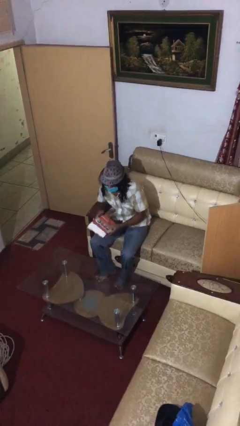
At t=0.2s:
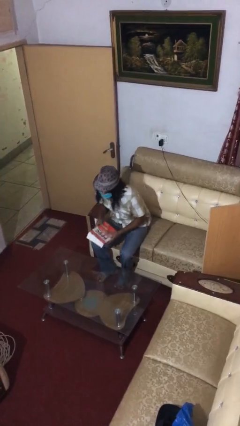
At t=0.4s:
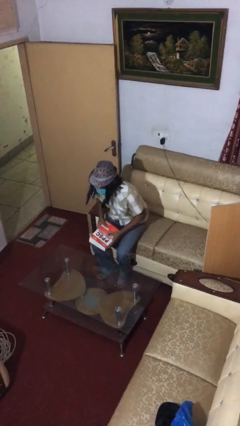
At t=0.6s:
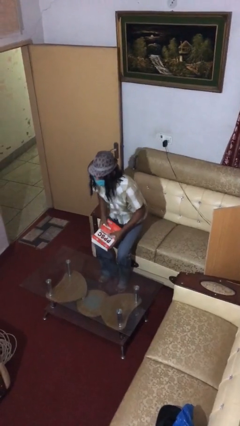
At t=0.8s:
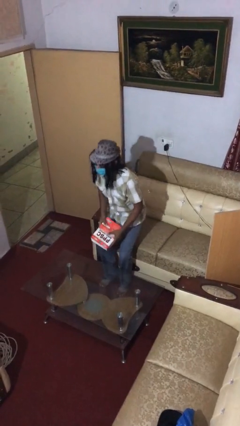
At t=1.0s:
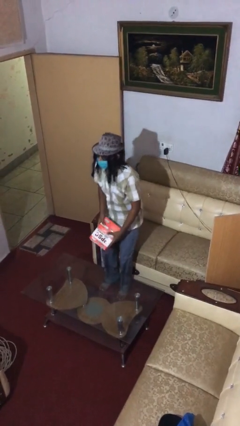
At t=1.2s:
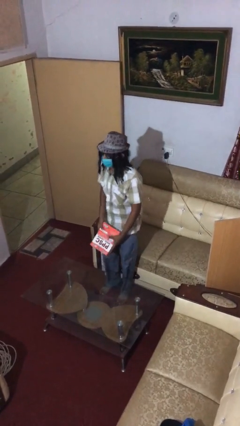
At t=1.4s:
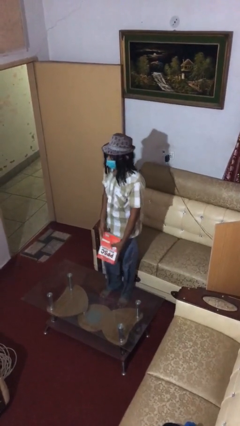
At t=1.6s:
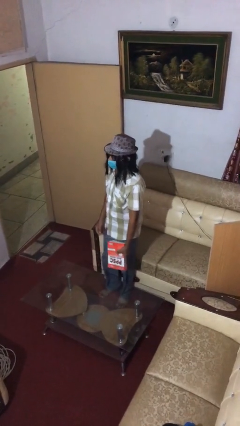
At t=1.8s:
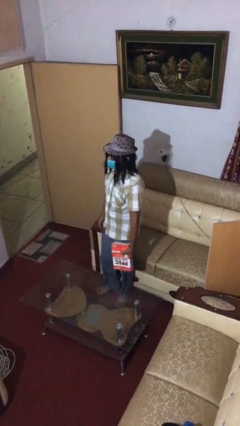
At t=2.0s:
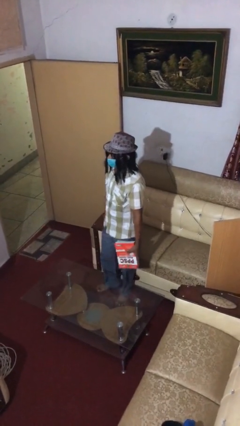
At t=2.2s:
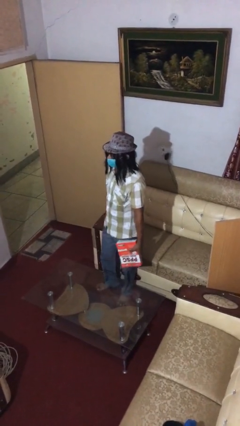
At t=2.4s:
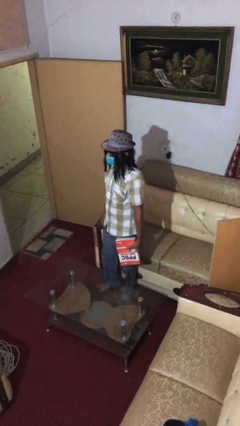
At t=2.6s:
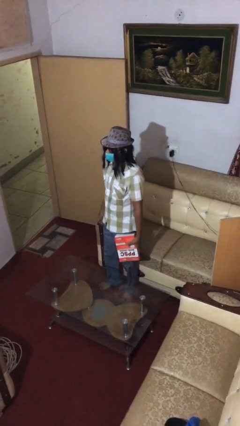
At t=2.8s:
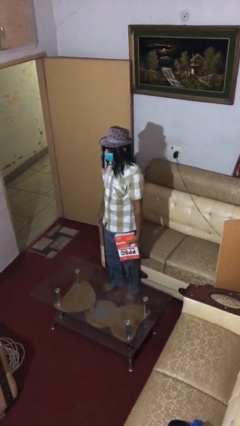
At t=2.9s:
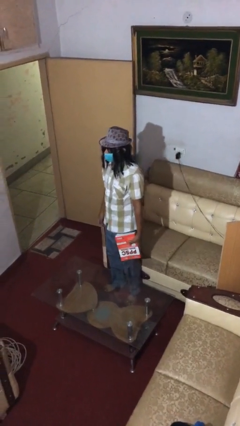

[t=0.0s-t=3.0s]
person stands up

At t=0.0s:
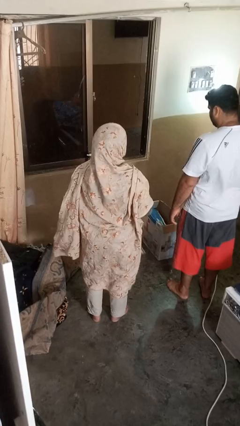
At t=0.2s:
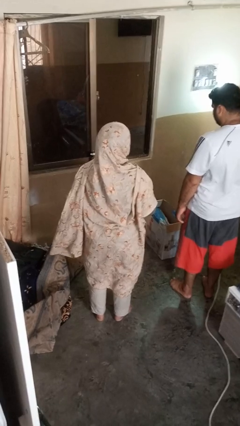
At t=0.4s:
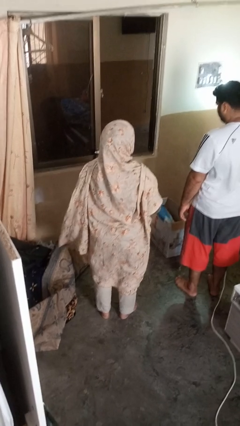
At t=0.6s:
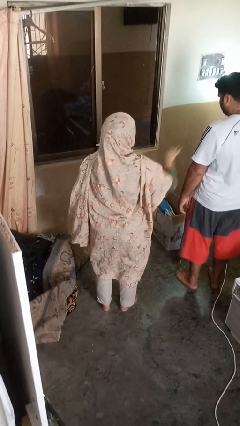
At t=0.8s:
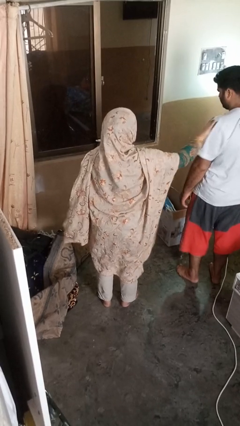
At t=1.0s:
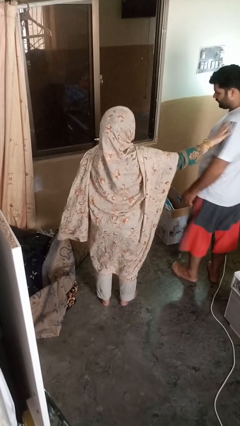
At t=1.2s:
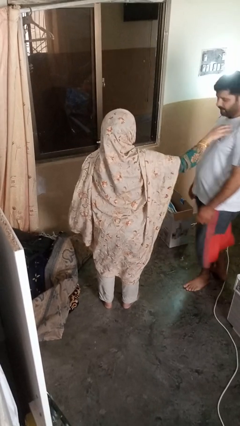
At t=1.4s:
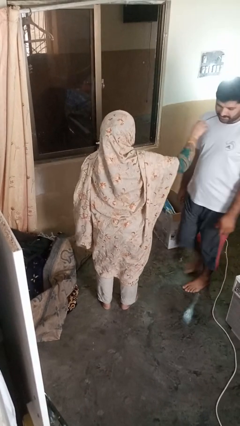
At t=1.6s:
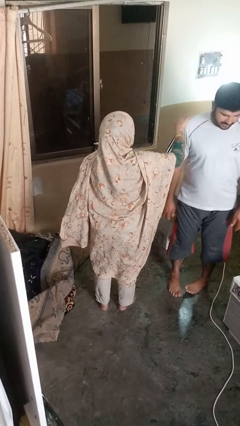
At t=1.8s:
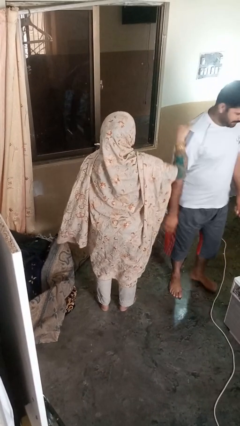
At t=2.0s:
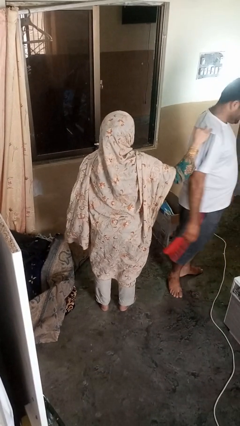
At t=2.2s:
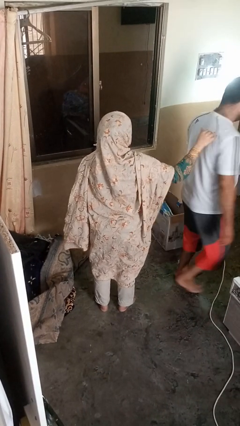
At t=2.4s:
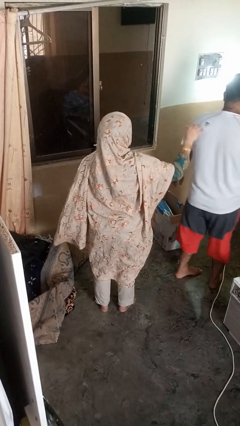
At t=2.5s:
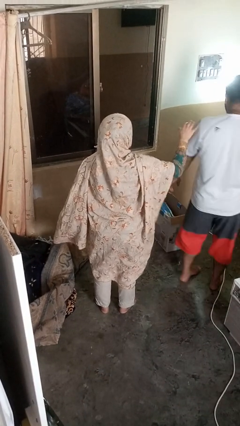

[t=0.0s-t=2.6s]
person grabs person by shoulder

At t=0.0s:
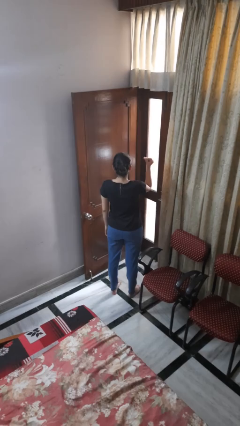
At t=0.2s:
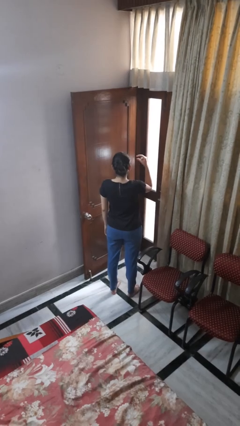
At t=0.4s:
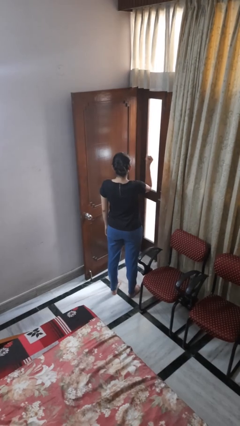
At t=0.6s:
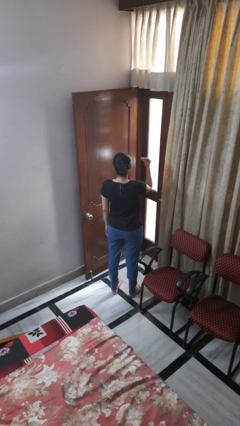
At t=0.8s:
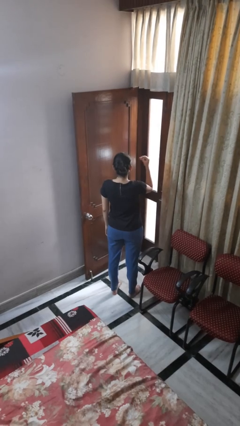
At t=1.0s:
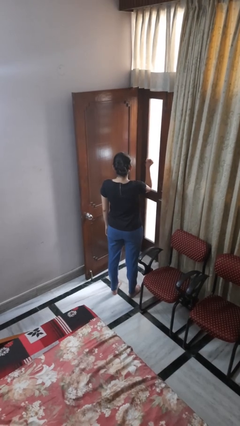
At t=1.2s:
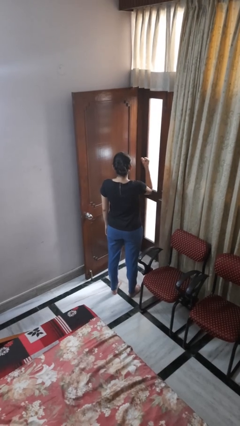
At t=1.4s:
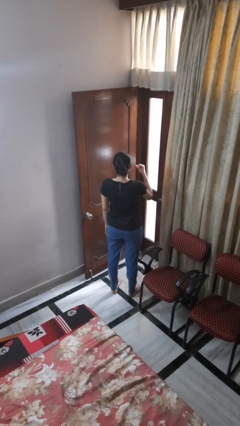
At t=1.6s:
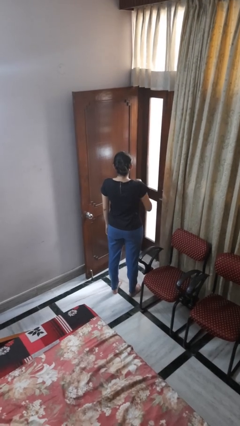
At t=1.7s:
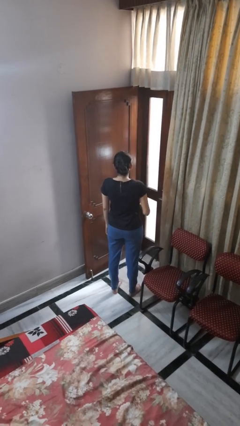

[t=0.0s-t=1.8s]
person snaps fingers

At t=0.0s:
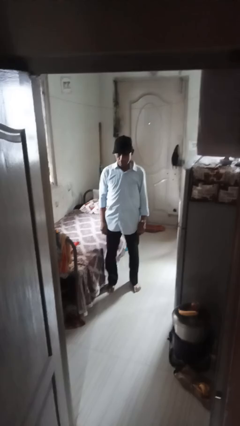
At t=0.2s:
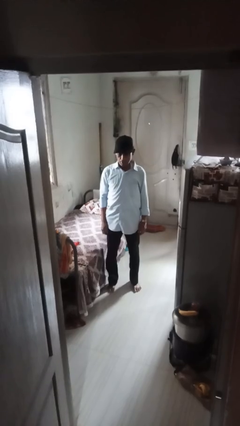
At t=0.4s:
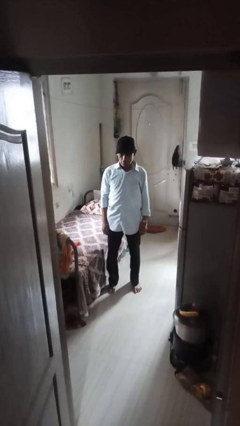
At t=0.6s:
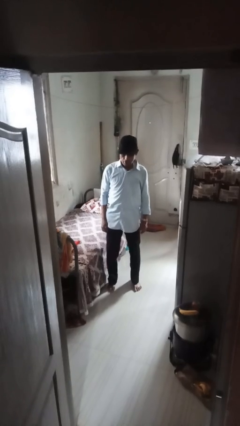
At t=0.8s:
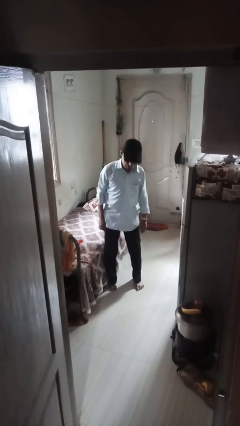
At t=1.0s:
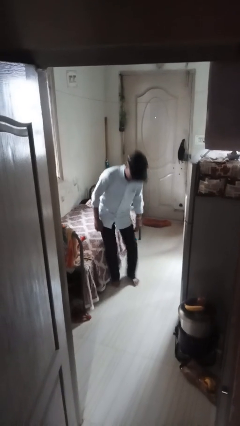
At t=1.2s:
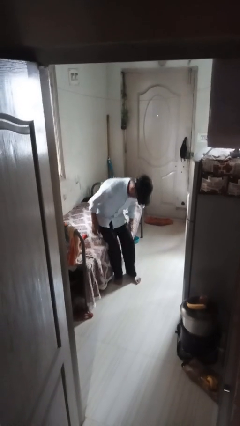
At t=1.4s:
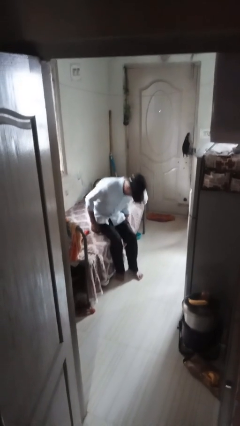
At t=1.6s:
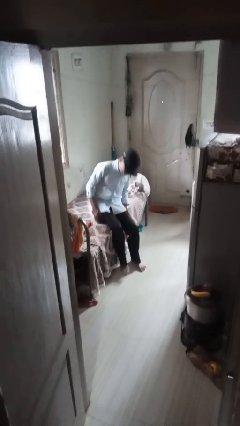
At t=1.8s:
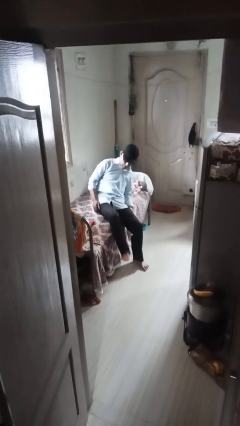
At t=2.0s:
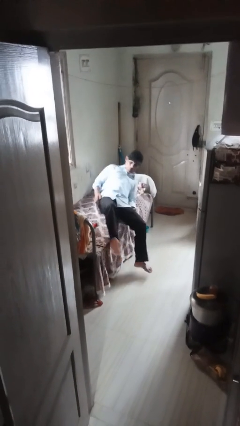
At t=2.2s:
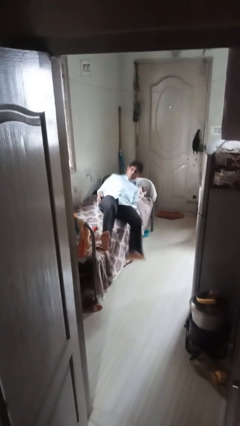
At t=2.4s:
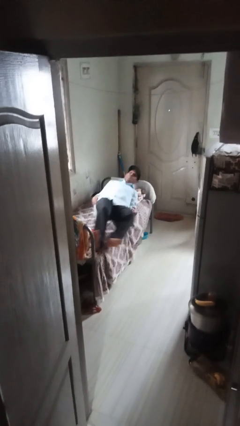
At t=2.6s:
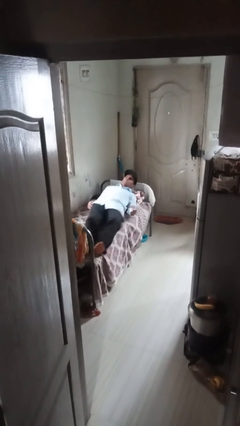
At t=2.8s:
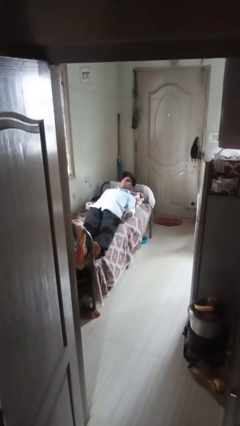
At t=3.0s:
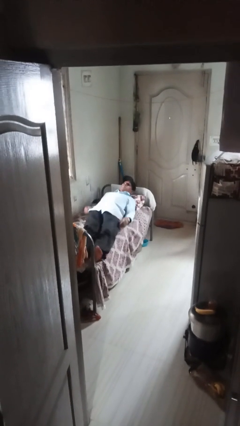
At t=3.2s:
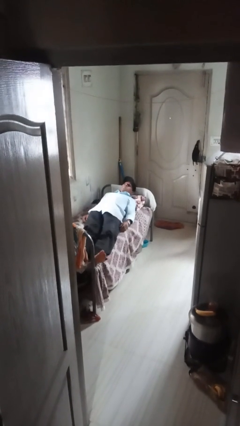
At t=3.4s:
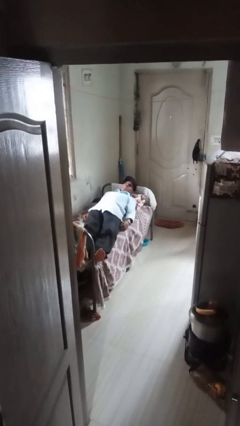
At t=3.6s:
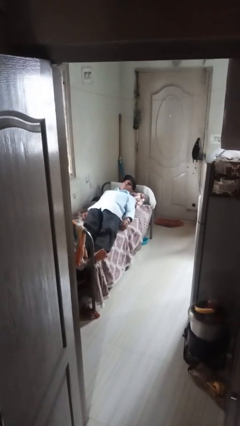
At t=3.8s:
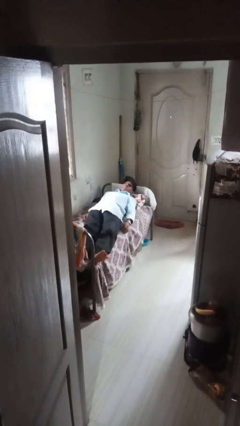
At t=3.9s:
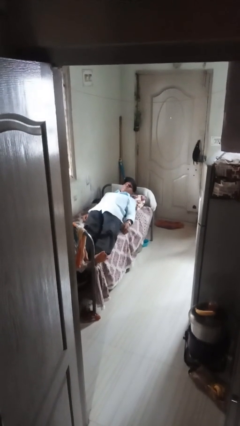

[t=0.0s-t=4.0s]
person lies down on bed

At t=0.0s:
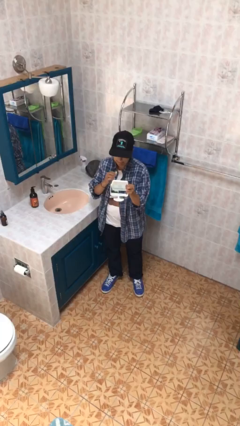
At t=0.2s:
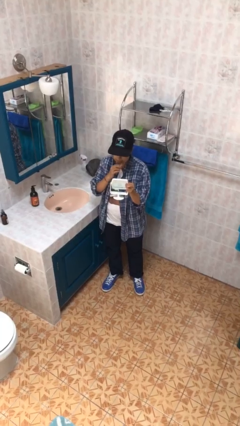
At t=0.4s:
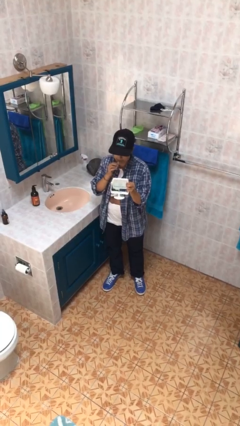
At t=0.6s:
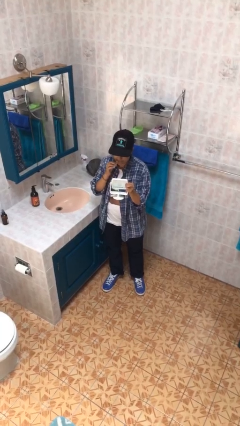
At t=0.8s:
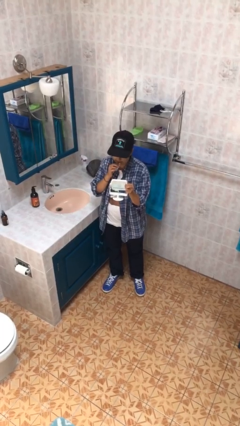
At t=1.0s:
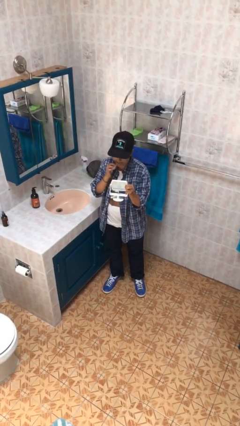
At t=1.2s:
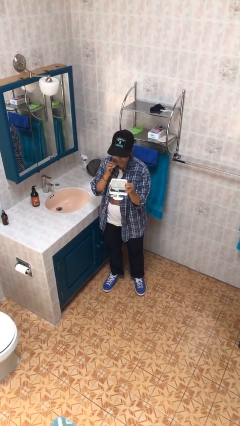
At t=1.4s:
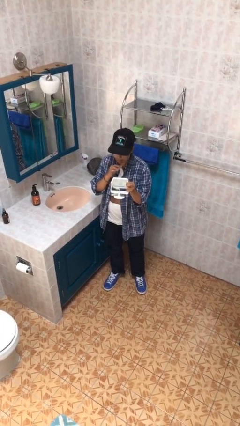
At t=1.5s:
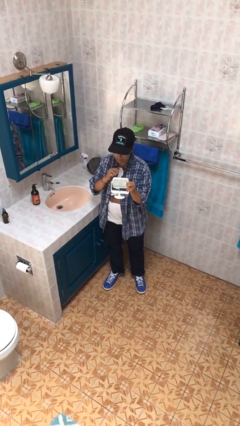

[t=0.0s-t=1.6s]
person applies lip makeup

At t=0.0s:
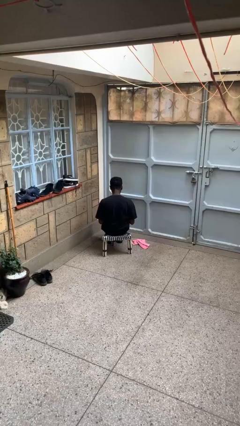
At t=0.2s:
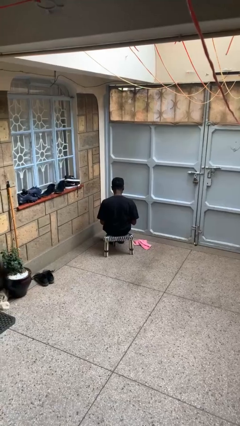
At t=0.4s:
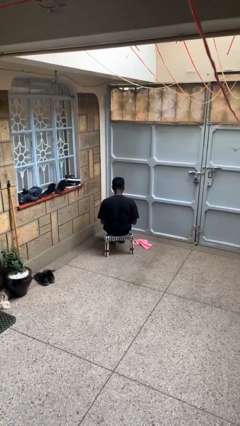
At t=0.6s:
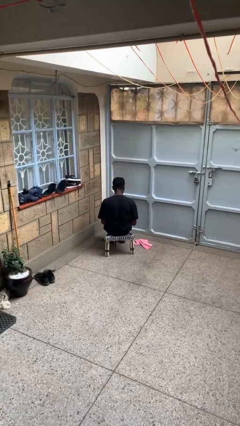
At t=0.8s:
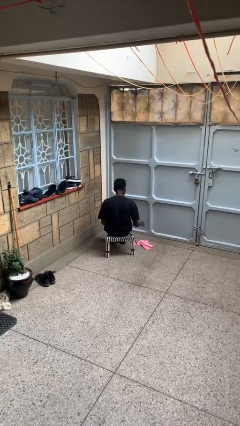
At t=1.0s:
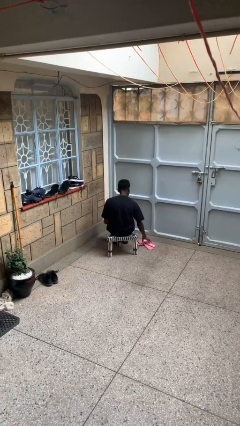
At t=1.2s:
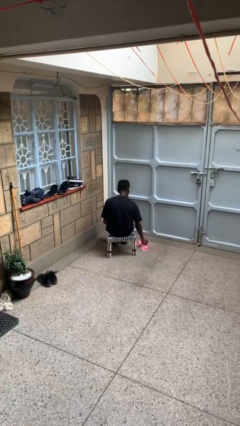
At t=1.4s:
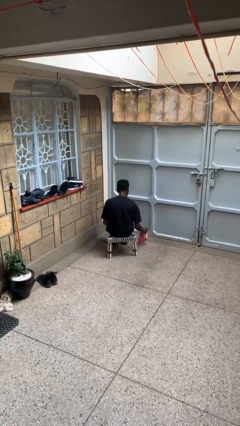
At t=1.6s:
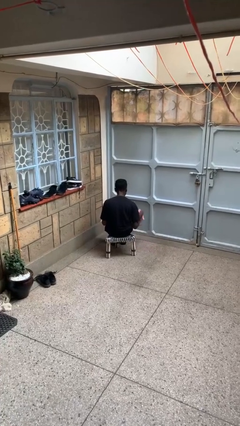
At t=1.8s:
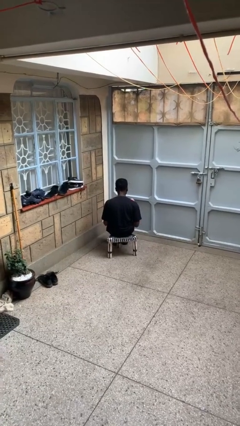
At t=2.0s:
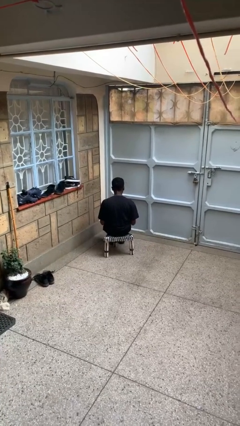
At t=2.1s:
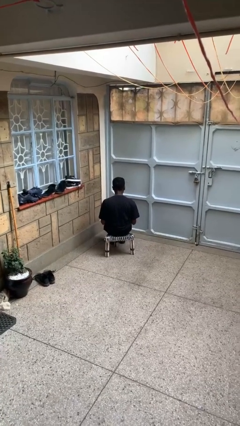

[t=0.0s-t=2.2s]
person picks up object from floor

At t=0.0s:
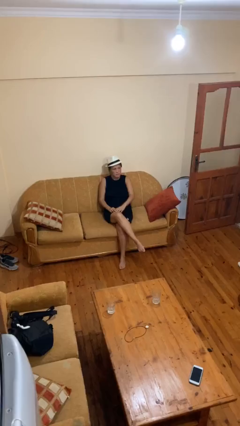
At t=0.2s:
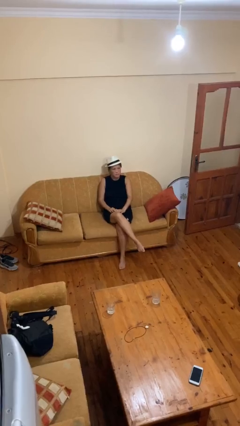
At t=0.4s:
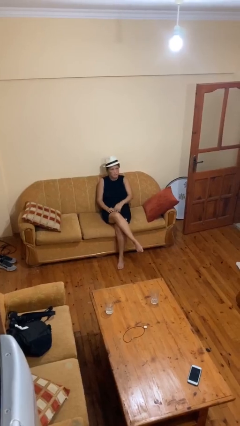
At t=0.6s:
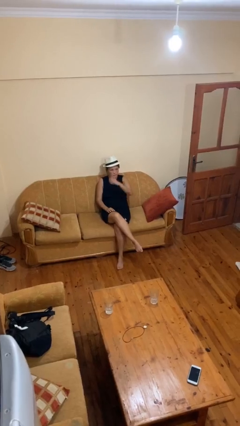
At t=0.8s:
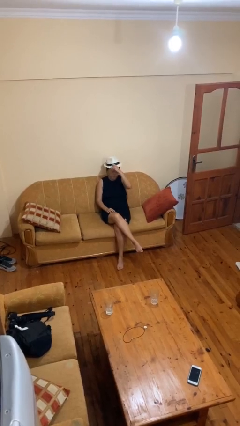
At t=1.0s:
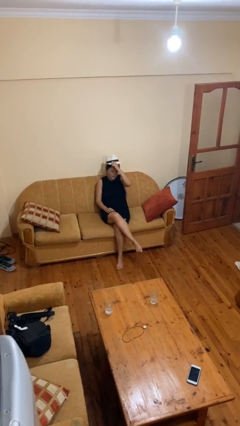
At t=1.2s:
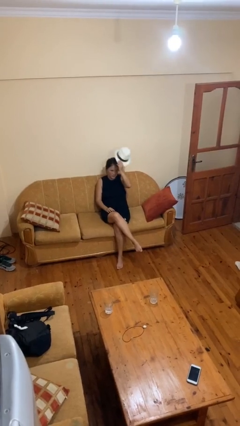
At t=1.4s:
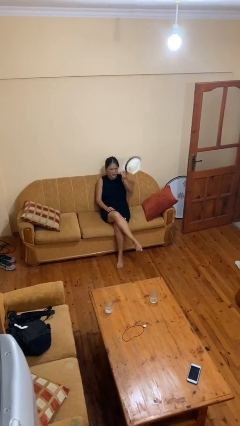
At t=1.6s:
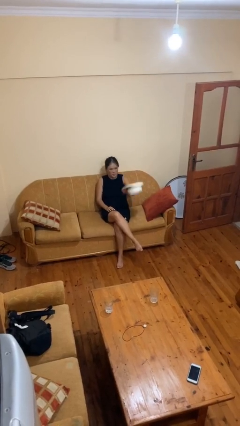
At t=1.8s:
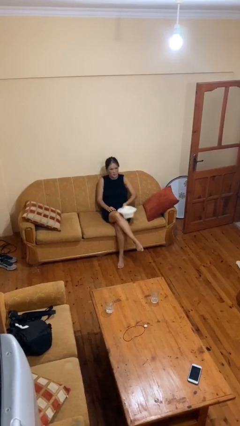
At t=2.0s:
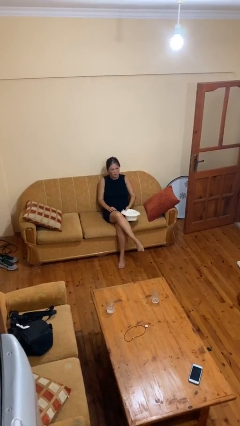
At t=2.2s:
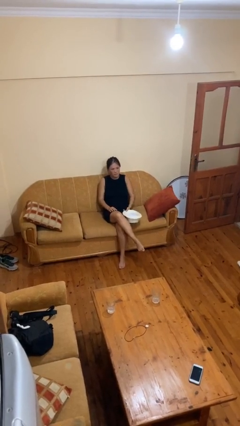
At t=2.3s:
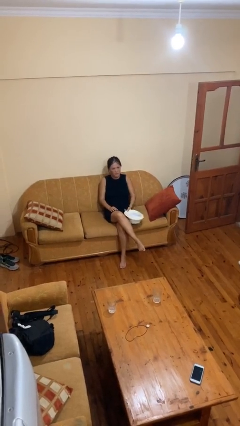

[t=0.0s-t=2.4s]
person takes off hat
